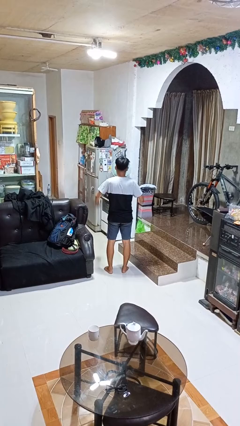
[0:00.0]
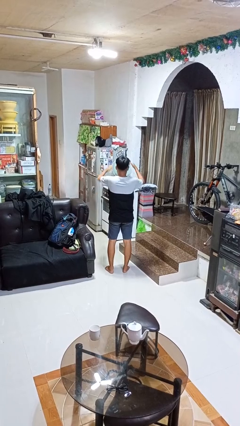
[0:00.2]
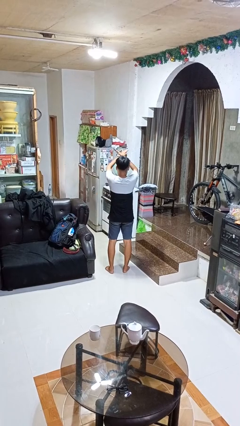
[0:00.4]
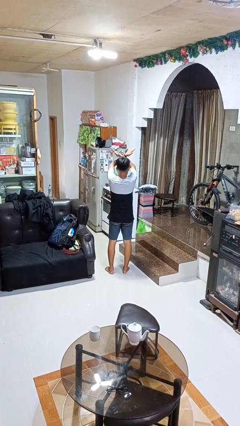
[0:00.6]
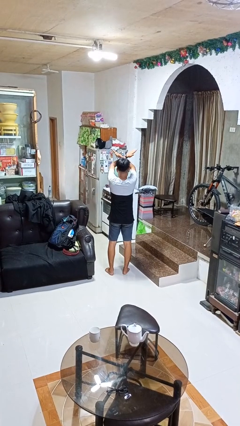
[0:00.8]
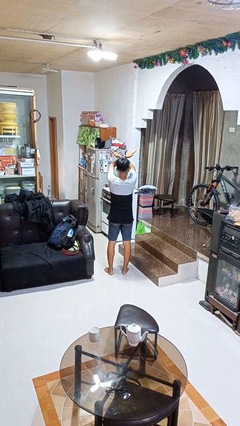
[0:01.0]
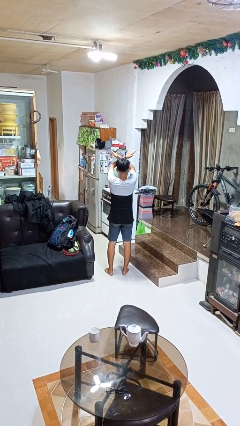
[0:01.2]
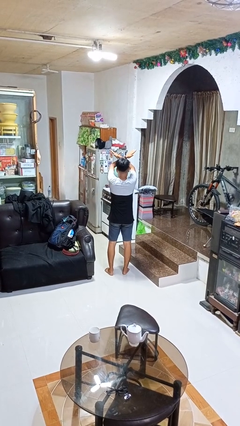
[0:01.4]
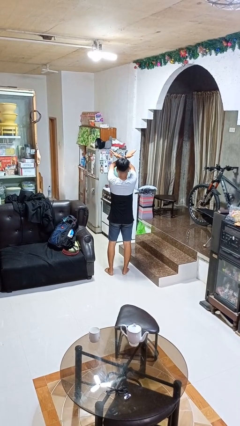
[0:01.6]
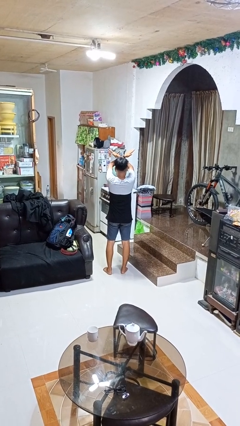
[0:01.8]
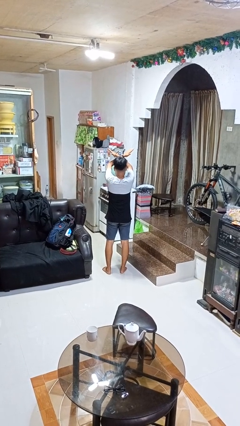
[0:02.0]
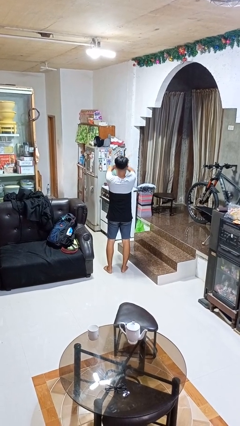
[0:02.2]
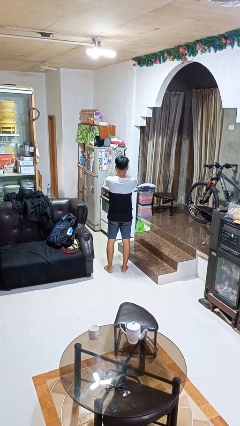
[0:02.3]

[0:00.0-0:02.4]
person gestures arms x

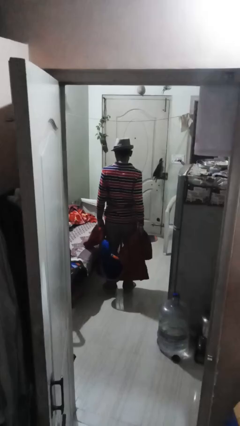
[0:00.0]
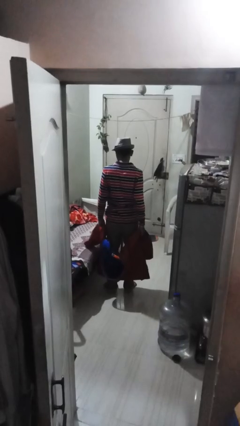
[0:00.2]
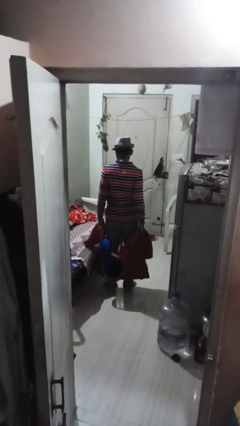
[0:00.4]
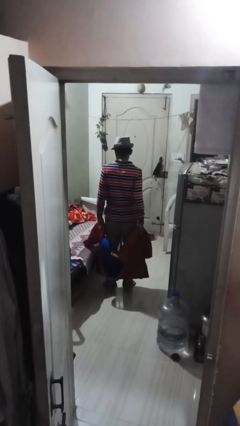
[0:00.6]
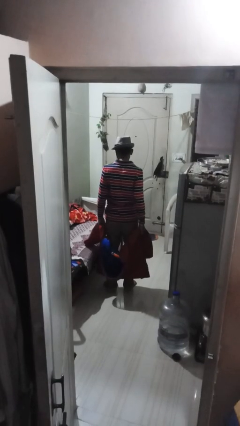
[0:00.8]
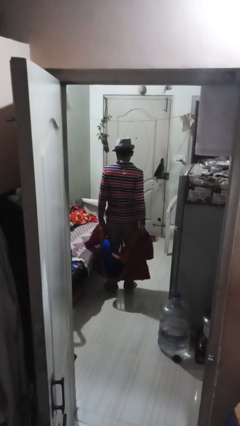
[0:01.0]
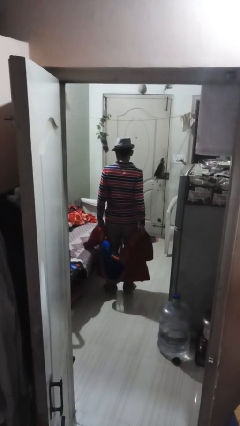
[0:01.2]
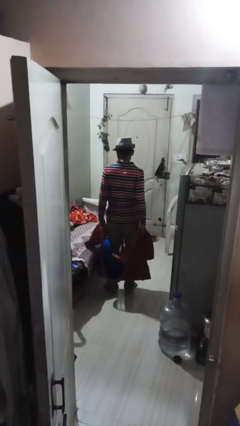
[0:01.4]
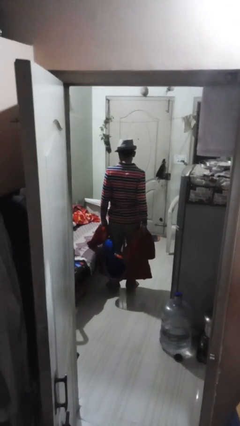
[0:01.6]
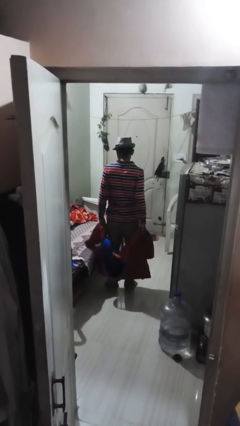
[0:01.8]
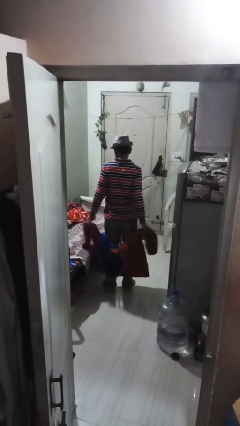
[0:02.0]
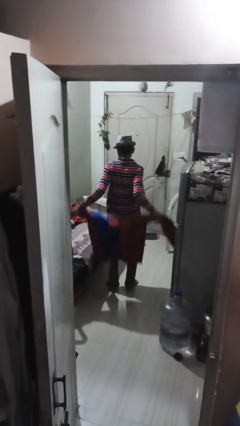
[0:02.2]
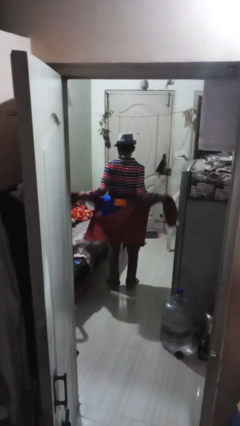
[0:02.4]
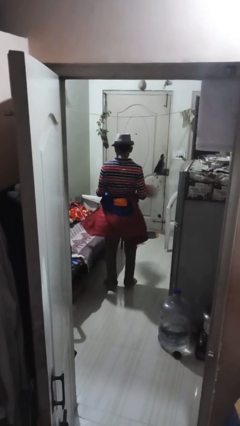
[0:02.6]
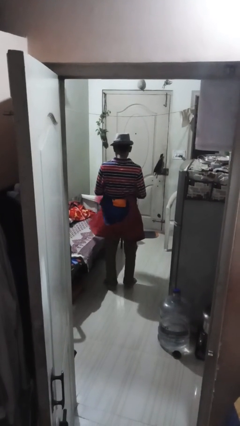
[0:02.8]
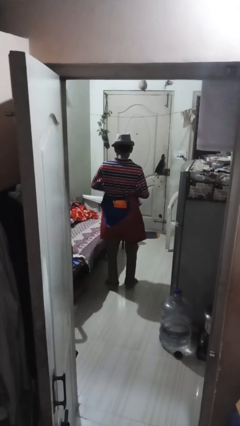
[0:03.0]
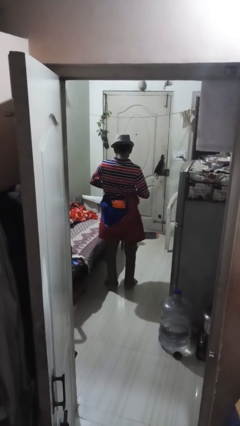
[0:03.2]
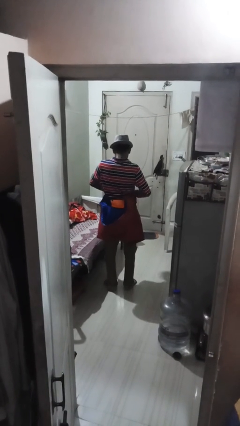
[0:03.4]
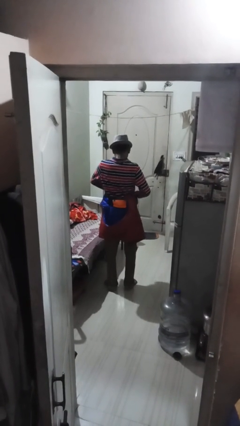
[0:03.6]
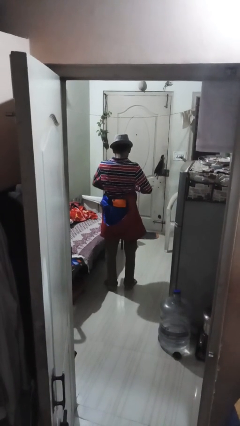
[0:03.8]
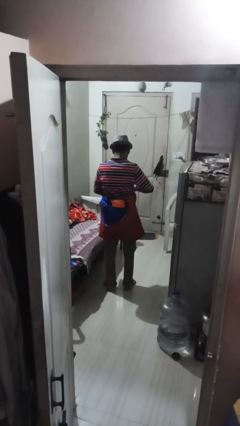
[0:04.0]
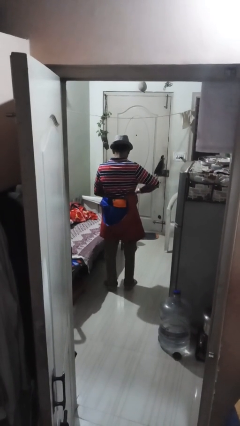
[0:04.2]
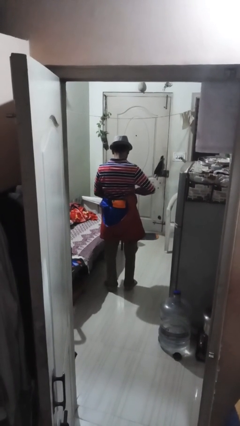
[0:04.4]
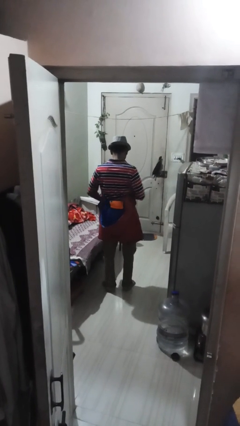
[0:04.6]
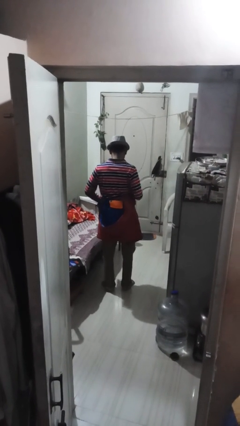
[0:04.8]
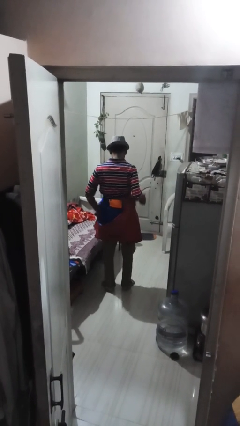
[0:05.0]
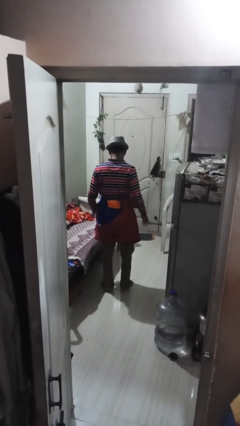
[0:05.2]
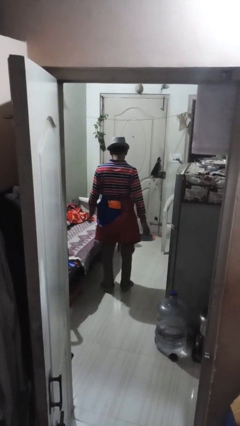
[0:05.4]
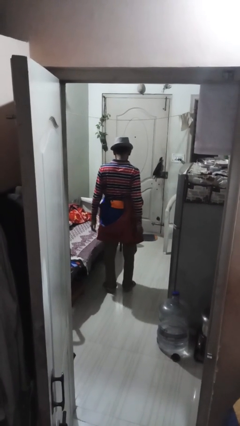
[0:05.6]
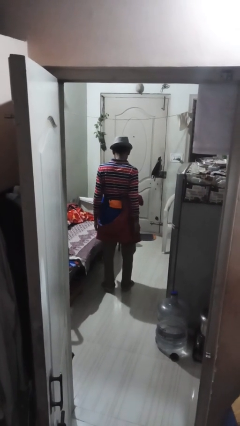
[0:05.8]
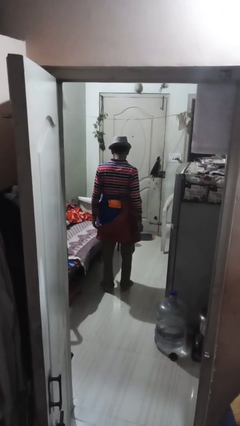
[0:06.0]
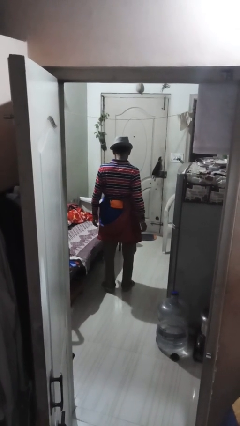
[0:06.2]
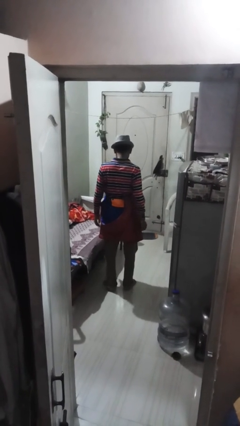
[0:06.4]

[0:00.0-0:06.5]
person ties jacket around waist

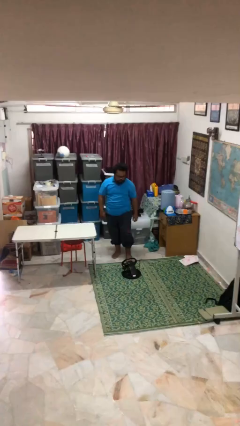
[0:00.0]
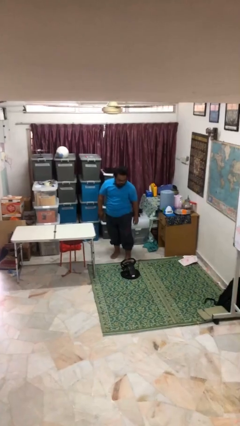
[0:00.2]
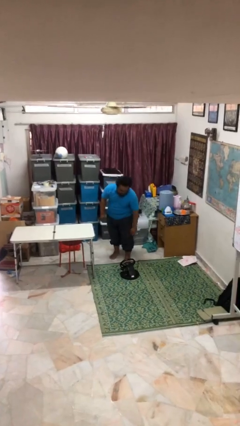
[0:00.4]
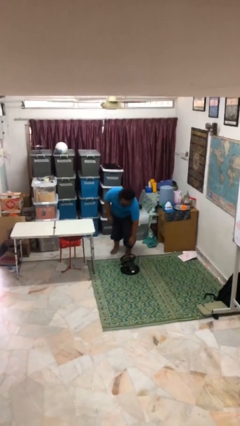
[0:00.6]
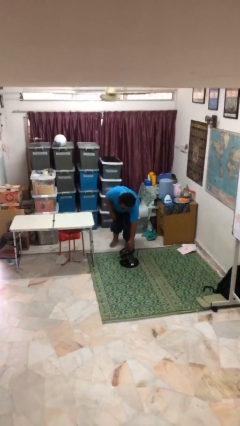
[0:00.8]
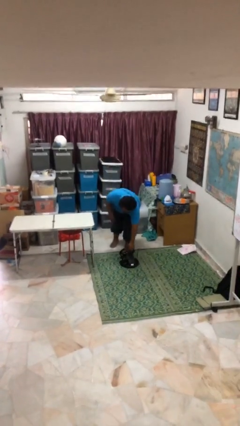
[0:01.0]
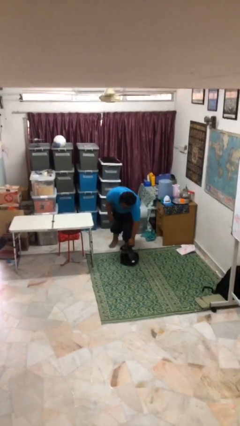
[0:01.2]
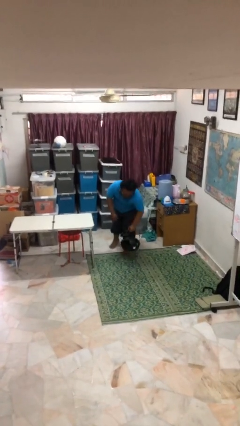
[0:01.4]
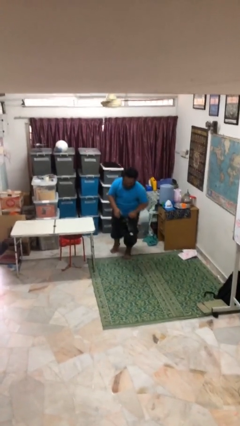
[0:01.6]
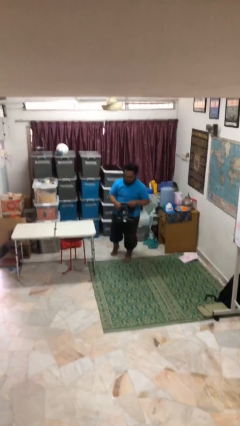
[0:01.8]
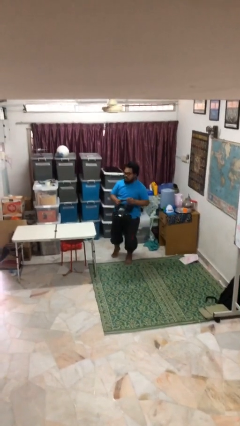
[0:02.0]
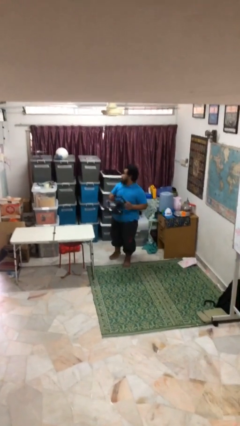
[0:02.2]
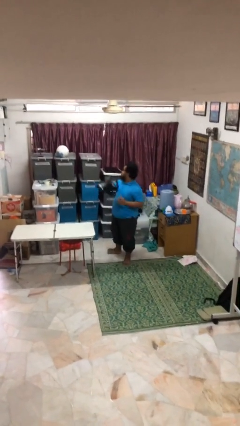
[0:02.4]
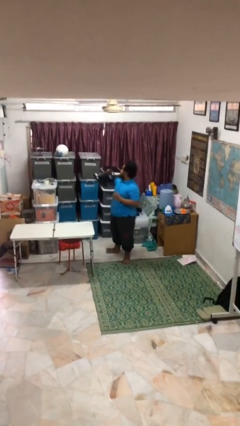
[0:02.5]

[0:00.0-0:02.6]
person picks up object from floor

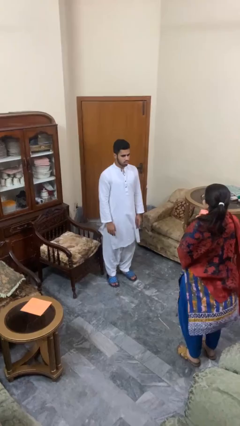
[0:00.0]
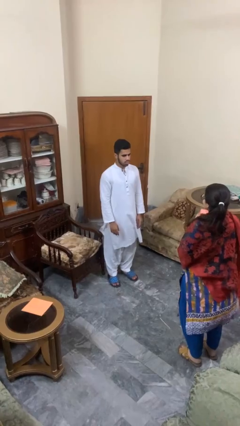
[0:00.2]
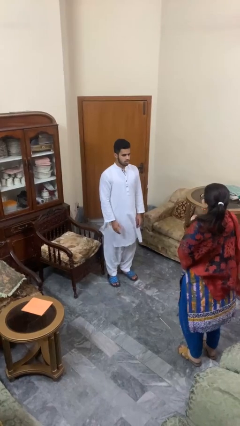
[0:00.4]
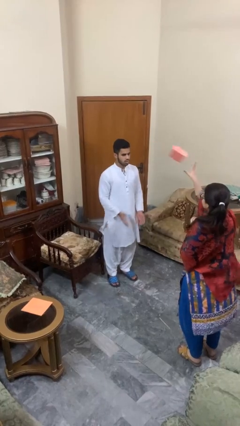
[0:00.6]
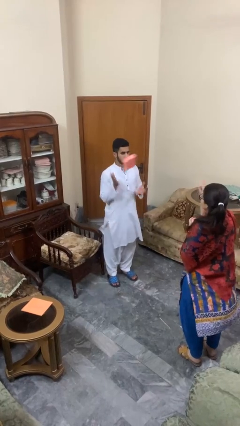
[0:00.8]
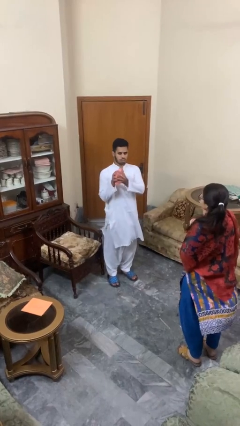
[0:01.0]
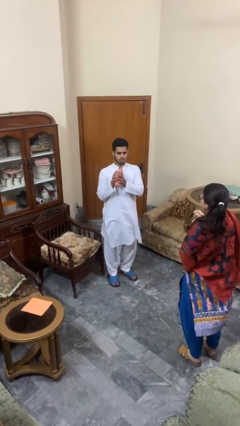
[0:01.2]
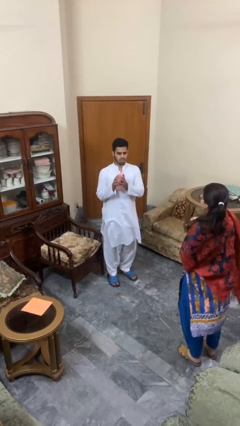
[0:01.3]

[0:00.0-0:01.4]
person catches object from person

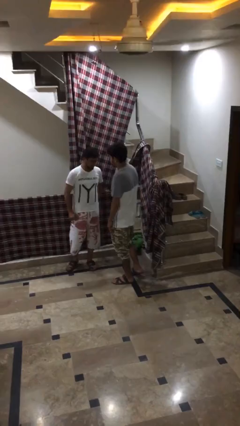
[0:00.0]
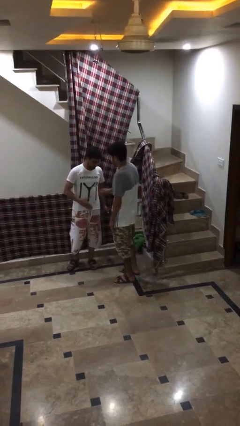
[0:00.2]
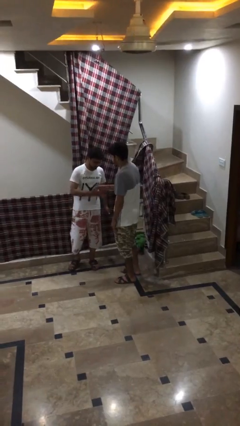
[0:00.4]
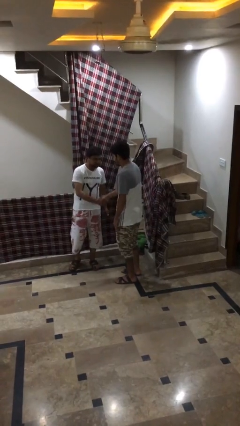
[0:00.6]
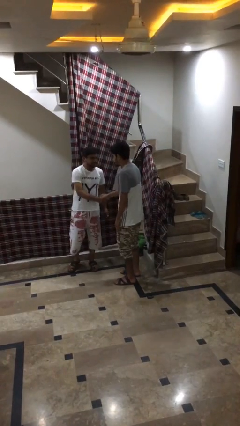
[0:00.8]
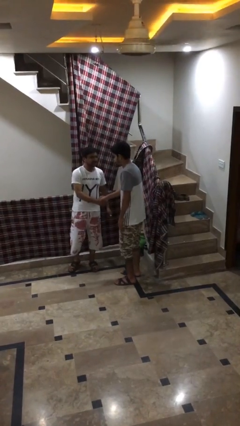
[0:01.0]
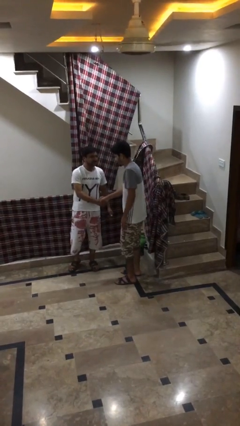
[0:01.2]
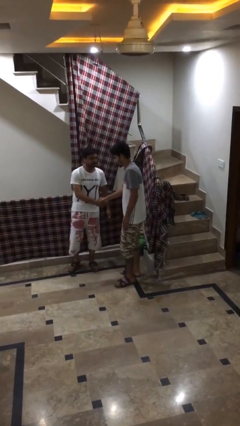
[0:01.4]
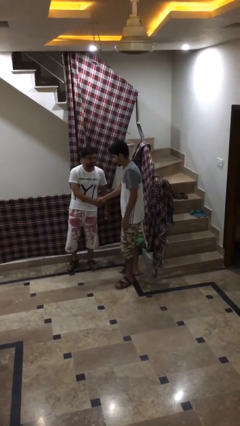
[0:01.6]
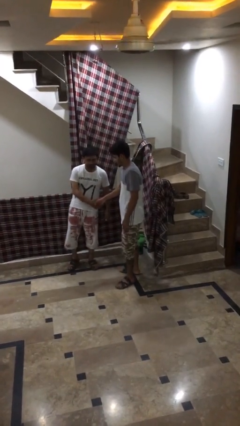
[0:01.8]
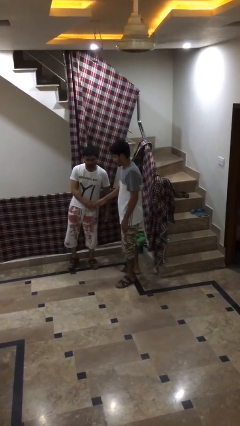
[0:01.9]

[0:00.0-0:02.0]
person shakes hand

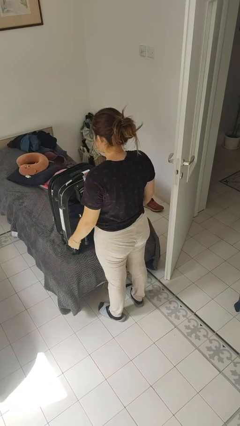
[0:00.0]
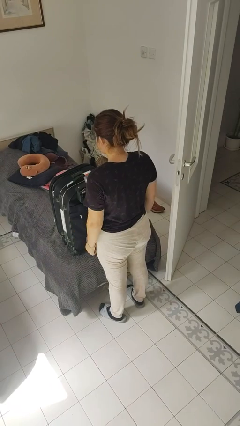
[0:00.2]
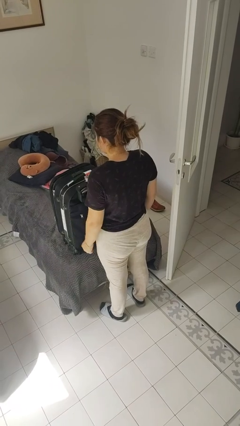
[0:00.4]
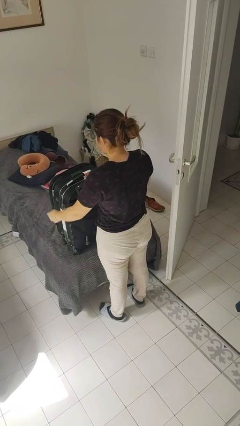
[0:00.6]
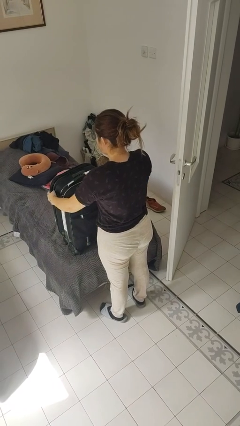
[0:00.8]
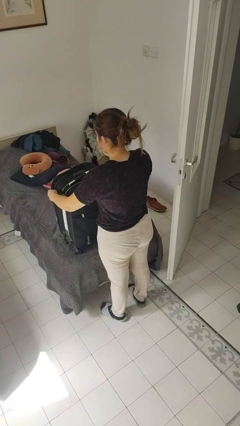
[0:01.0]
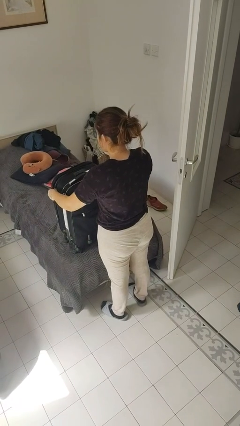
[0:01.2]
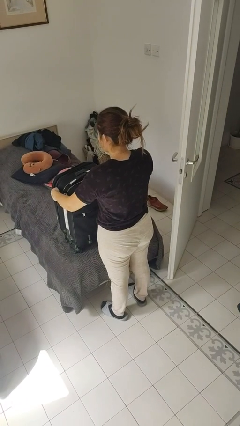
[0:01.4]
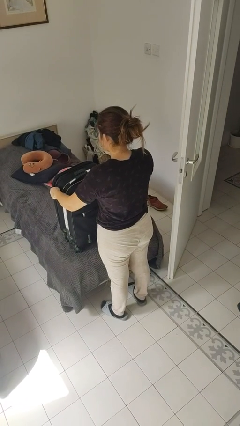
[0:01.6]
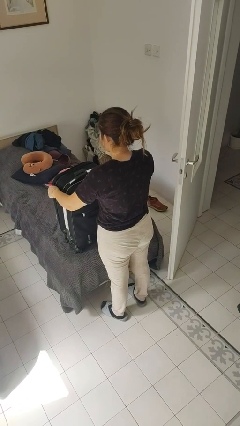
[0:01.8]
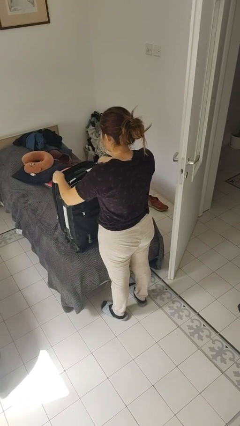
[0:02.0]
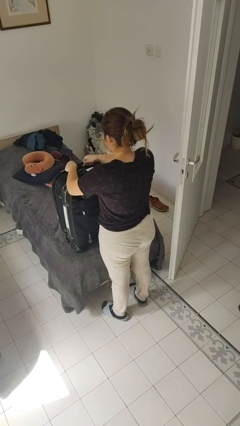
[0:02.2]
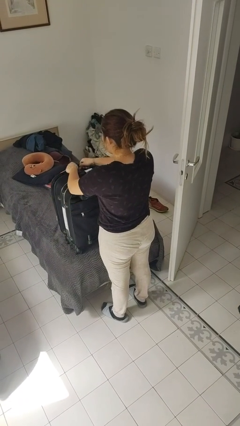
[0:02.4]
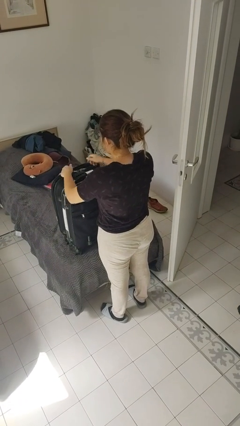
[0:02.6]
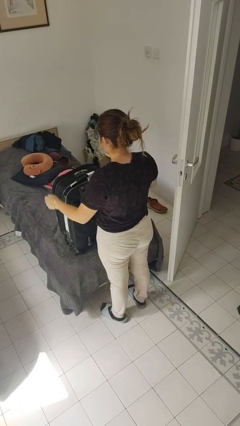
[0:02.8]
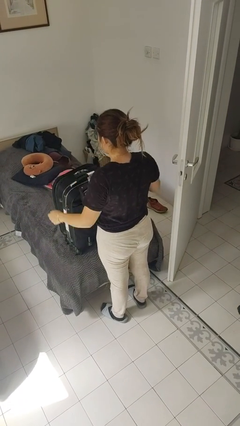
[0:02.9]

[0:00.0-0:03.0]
person closes suitcase
